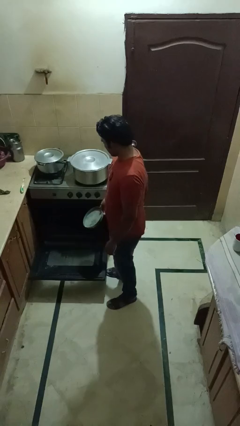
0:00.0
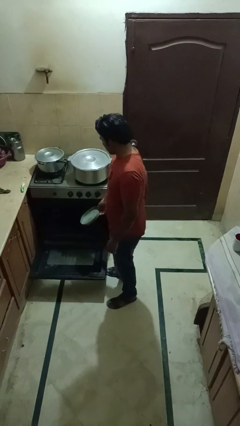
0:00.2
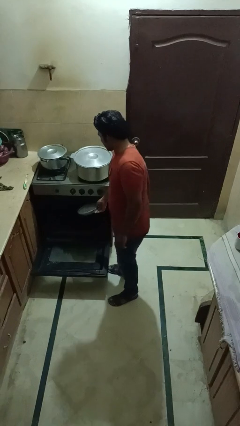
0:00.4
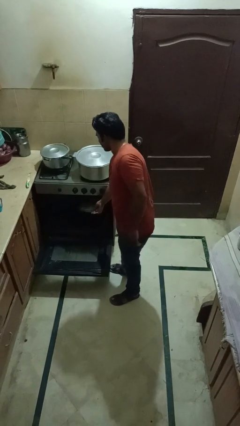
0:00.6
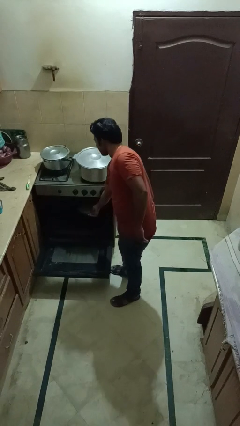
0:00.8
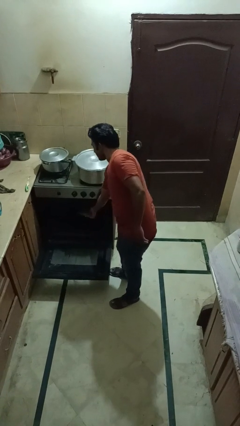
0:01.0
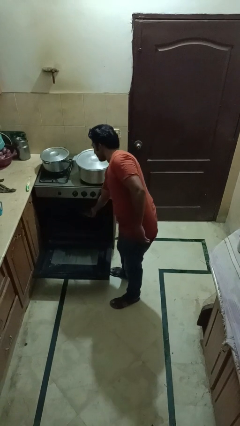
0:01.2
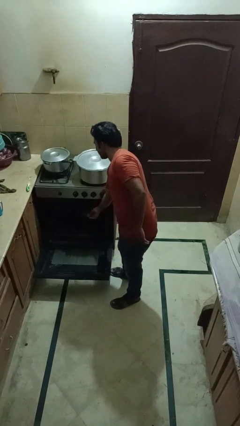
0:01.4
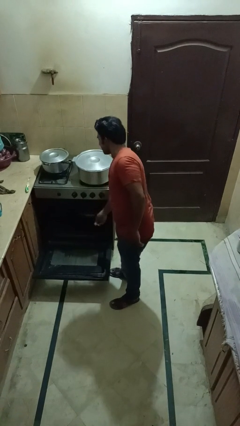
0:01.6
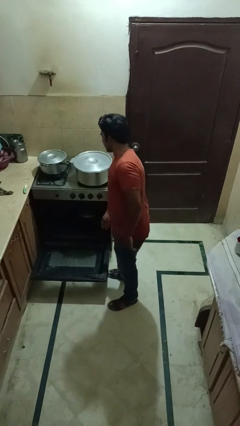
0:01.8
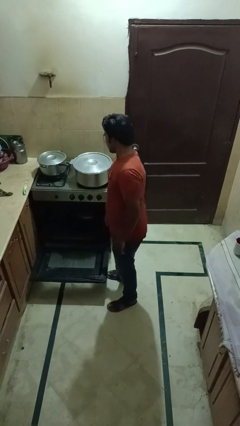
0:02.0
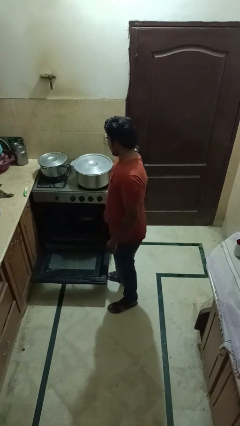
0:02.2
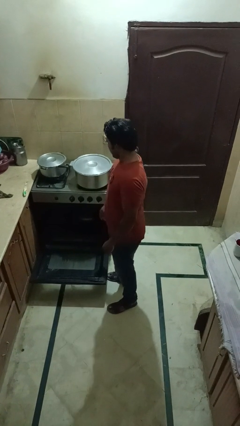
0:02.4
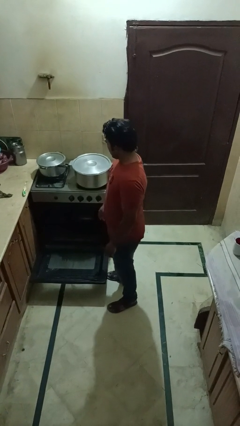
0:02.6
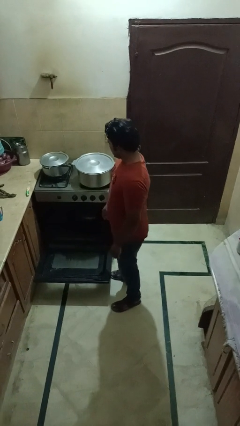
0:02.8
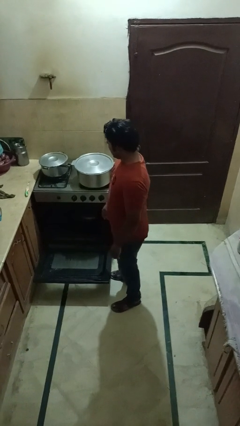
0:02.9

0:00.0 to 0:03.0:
person puts object into oven

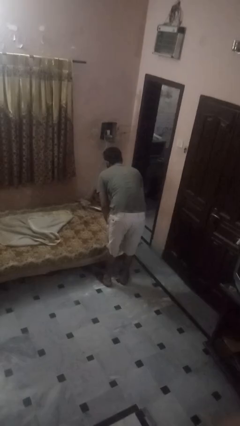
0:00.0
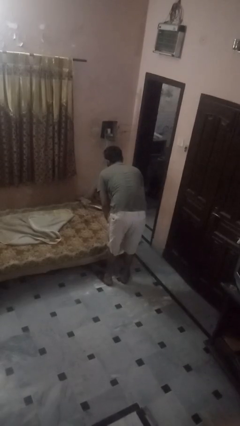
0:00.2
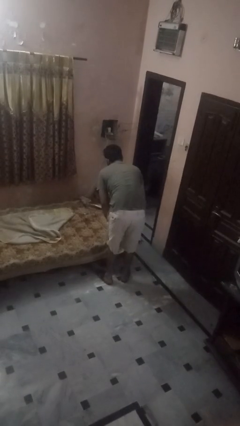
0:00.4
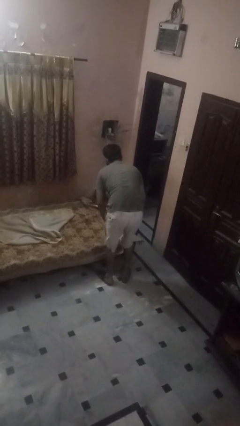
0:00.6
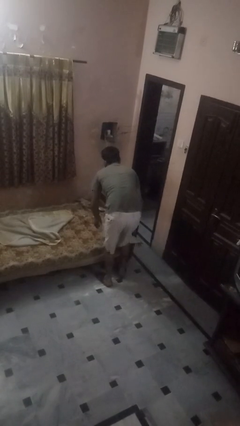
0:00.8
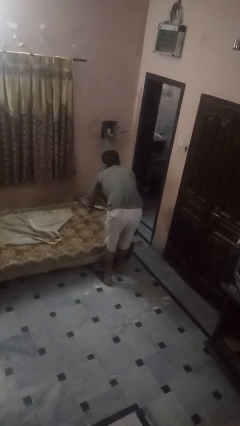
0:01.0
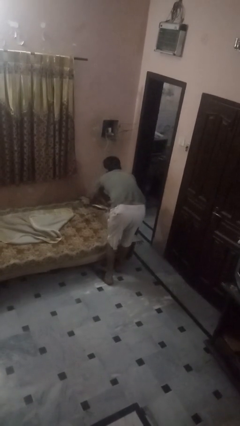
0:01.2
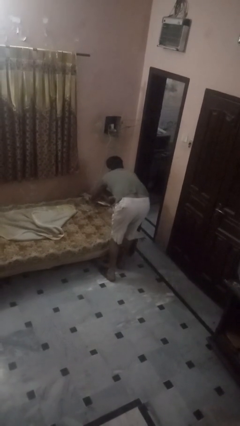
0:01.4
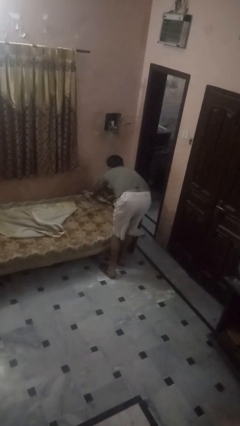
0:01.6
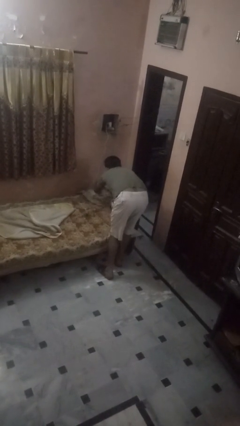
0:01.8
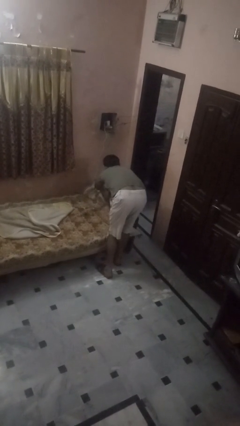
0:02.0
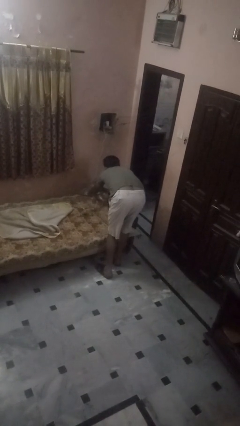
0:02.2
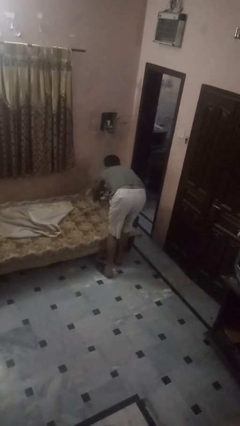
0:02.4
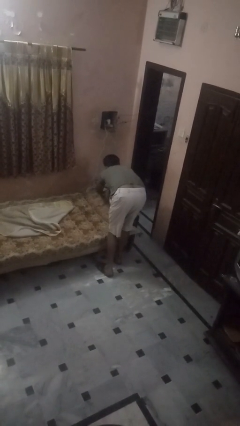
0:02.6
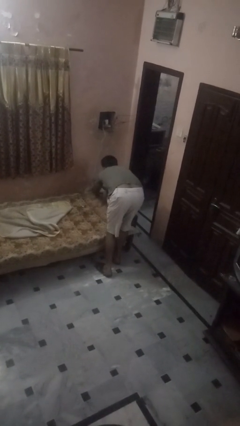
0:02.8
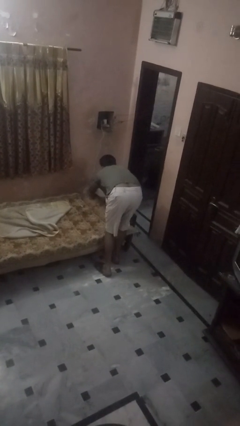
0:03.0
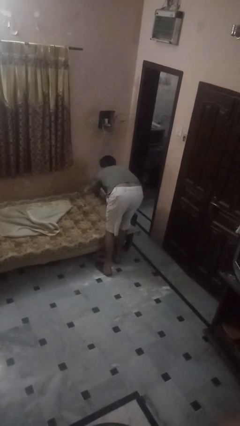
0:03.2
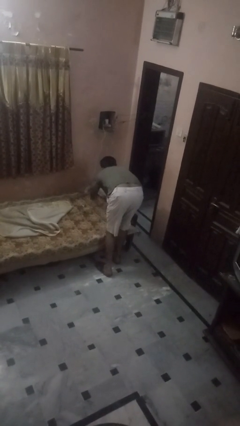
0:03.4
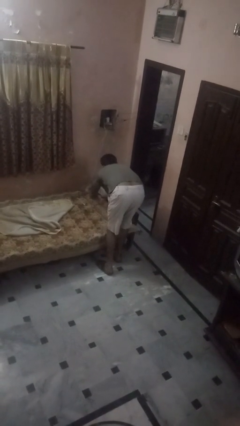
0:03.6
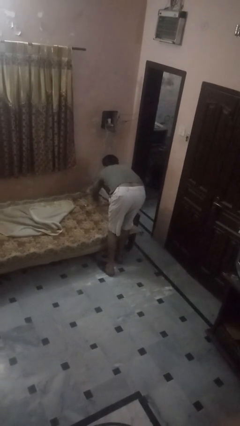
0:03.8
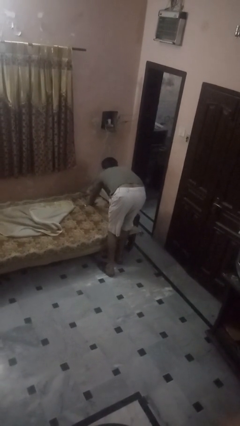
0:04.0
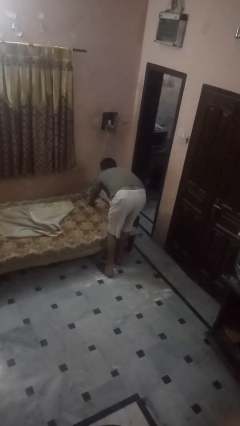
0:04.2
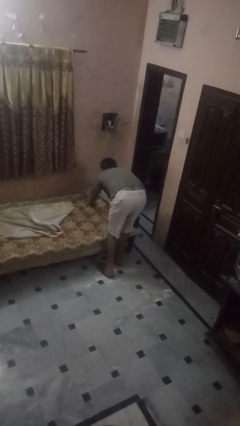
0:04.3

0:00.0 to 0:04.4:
person makes bed

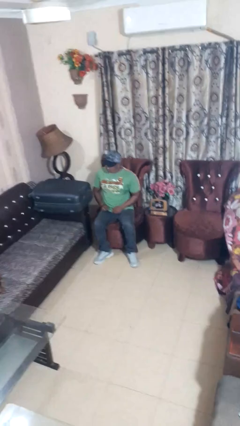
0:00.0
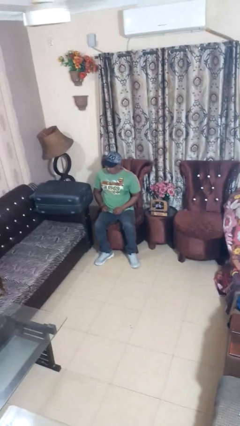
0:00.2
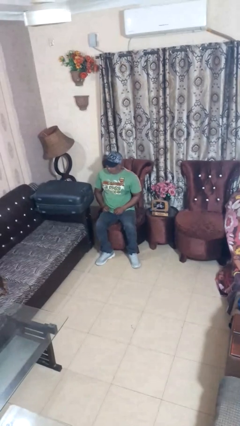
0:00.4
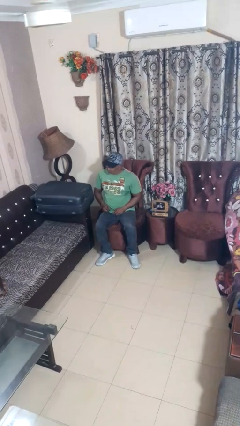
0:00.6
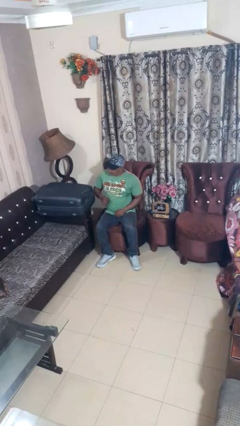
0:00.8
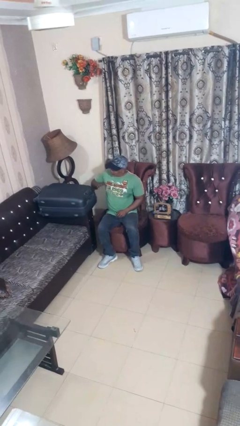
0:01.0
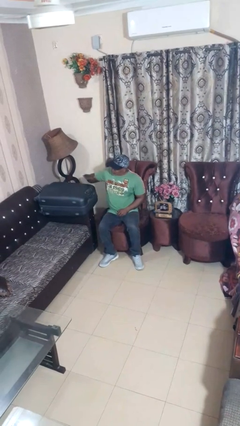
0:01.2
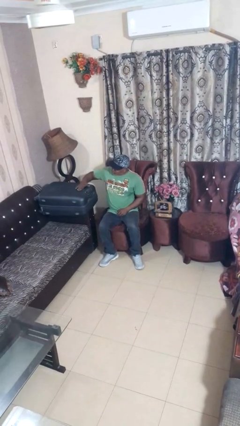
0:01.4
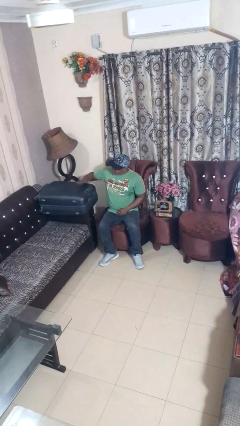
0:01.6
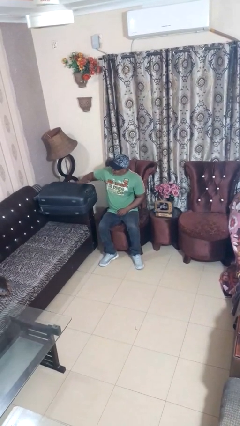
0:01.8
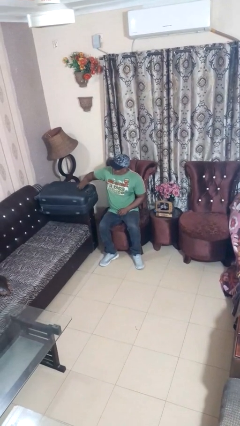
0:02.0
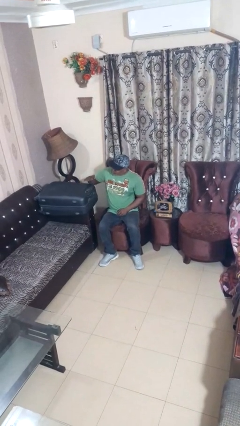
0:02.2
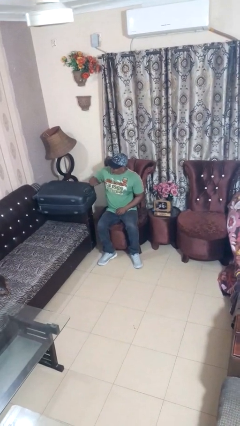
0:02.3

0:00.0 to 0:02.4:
person taps object with finger

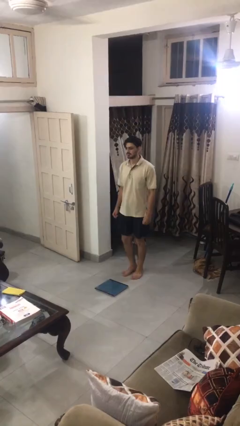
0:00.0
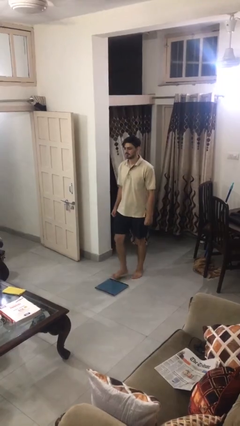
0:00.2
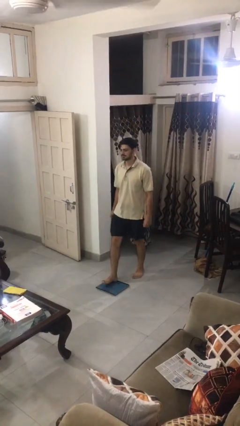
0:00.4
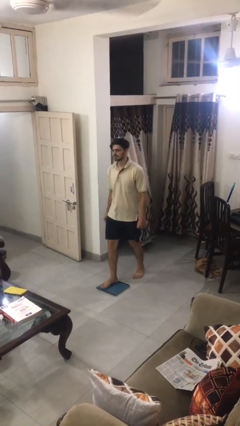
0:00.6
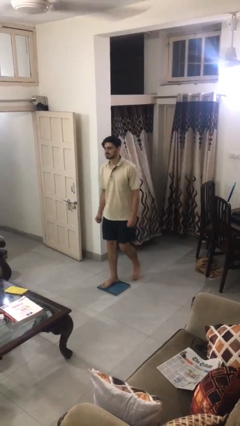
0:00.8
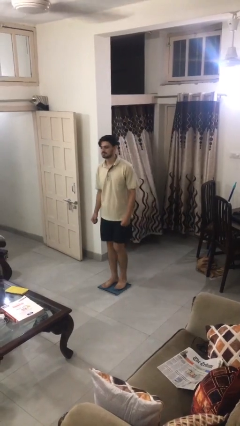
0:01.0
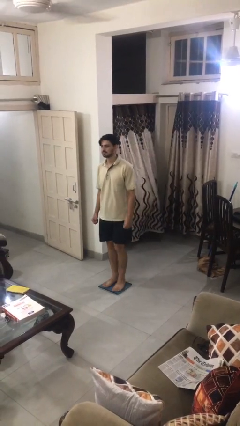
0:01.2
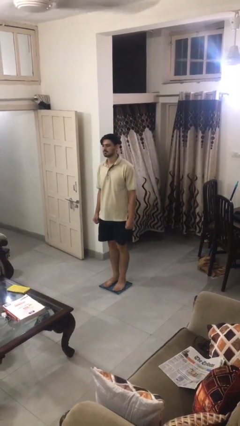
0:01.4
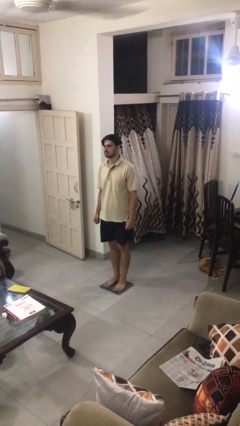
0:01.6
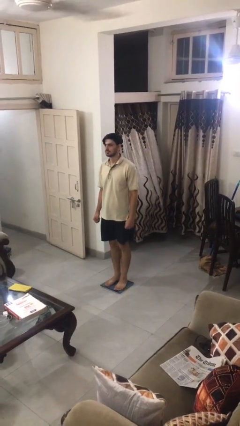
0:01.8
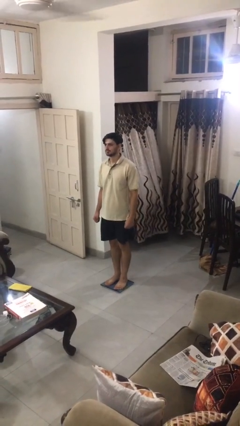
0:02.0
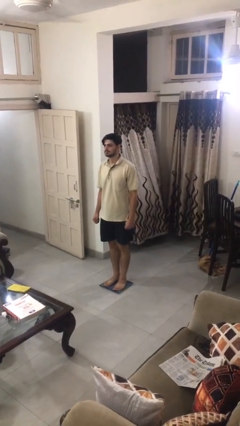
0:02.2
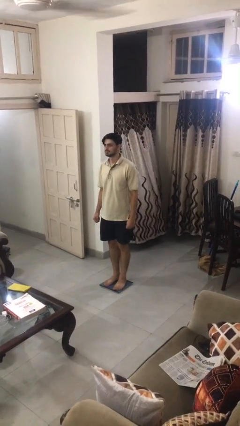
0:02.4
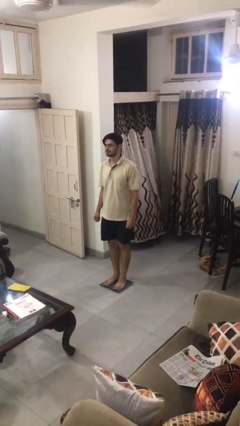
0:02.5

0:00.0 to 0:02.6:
person uses bodyweight scale

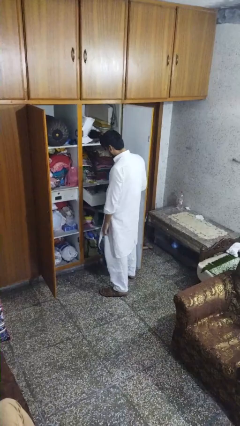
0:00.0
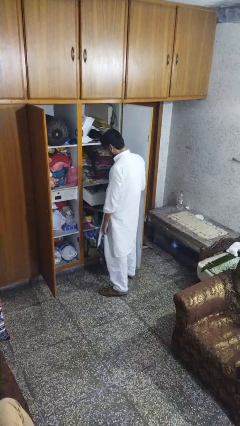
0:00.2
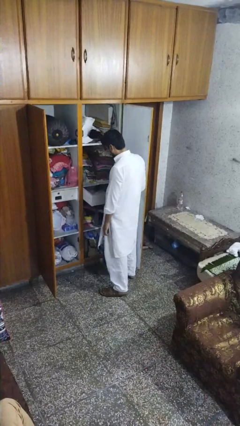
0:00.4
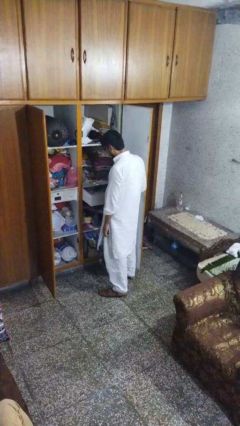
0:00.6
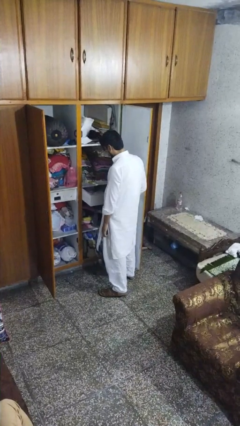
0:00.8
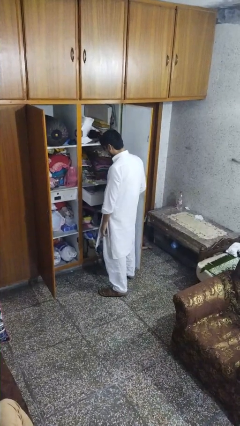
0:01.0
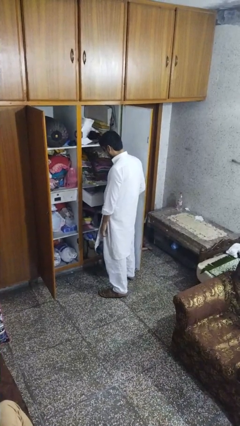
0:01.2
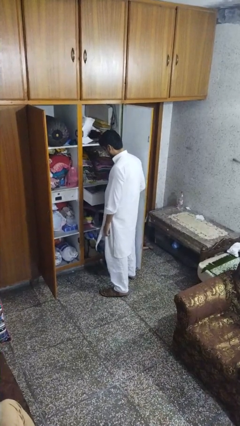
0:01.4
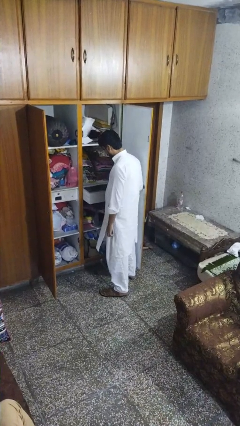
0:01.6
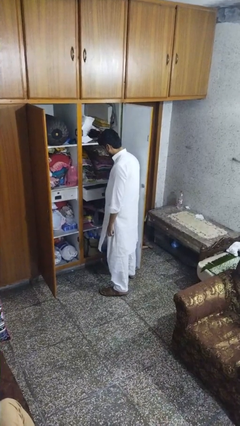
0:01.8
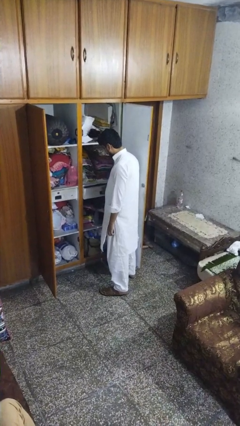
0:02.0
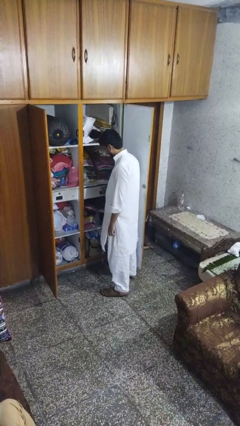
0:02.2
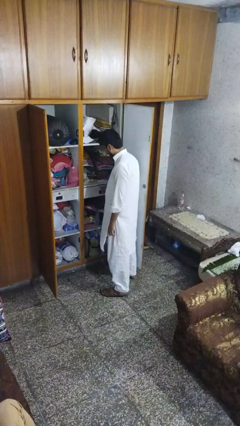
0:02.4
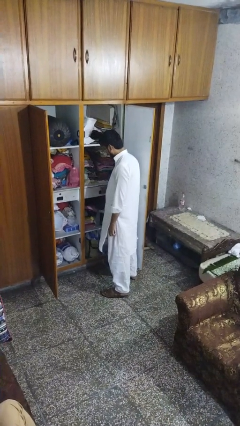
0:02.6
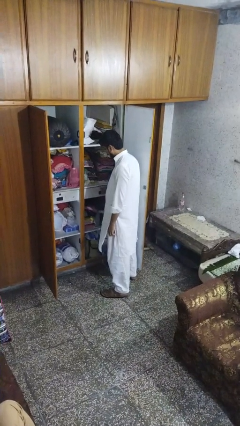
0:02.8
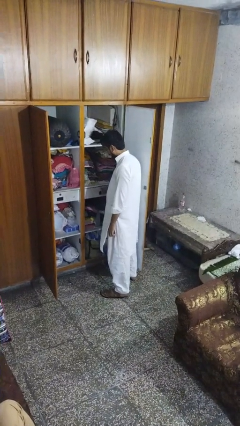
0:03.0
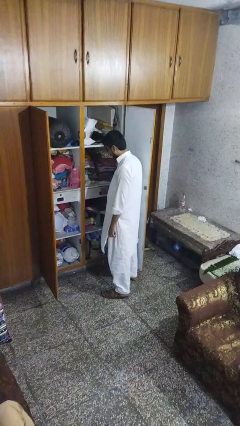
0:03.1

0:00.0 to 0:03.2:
person closes dresser drawer

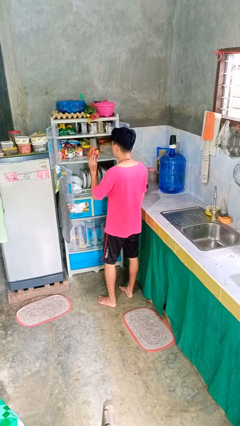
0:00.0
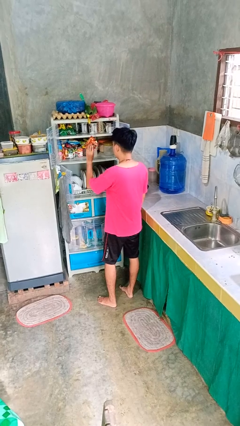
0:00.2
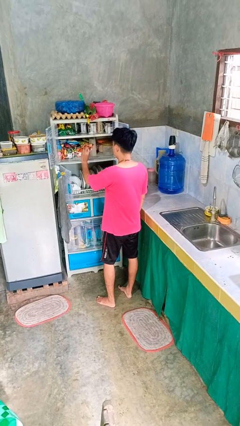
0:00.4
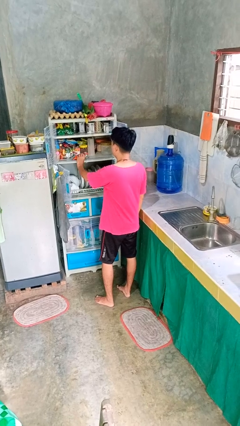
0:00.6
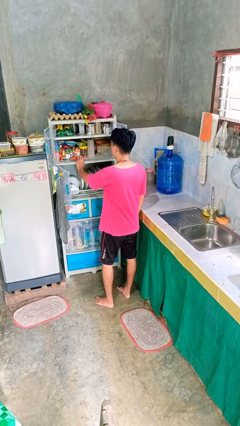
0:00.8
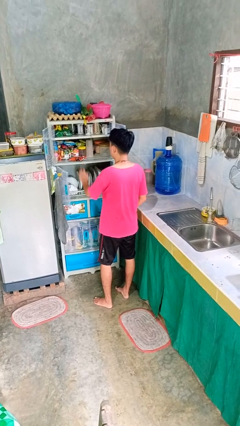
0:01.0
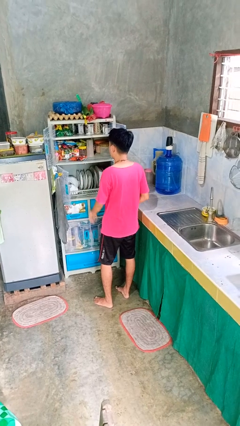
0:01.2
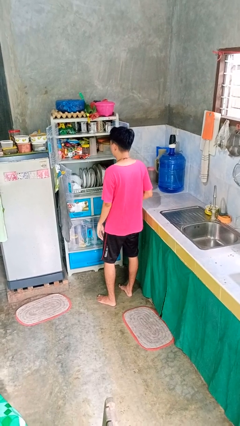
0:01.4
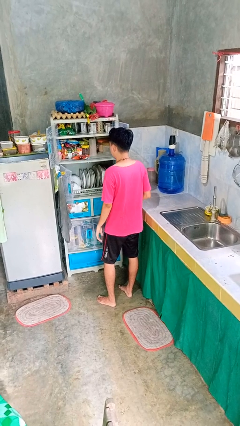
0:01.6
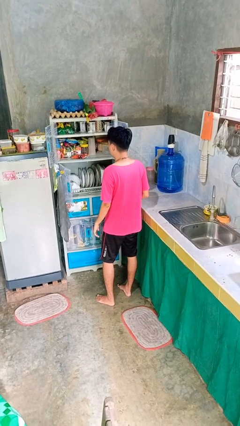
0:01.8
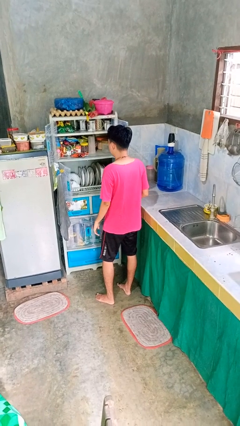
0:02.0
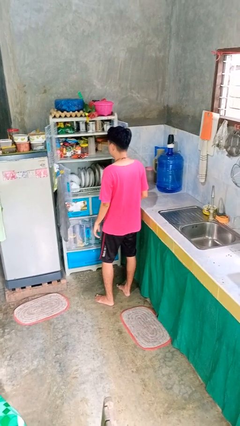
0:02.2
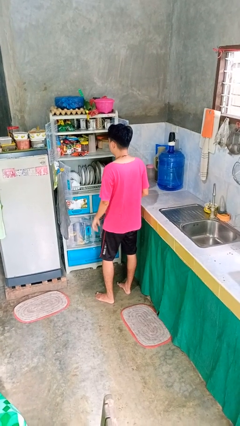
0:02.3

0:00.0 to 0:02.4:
person puts object in cabinet
